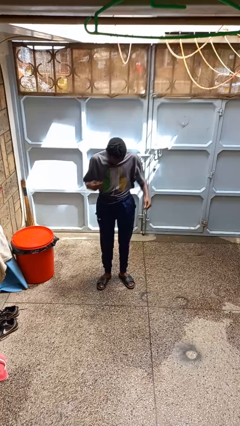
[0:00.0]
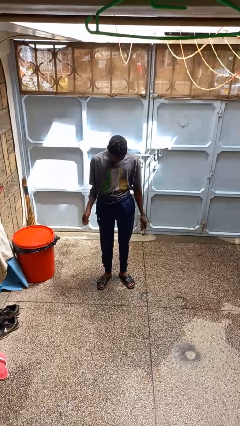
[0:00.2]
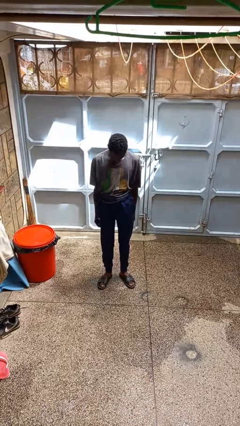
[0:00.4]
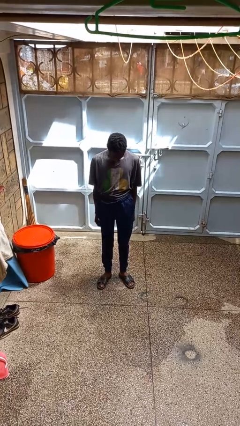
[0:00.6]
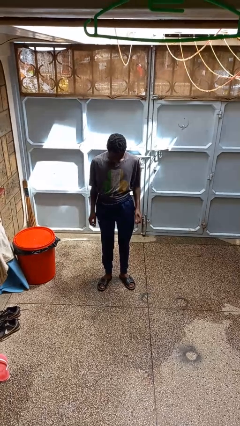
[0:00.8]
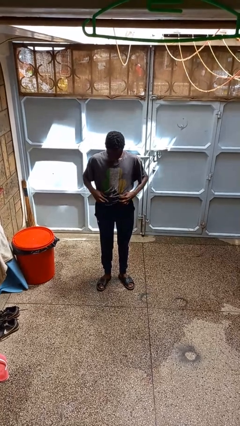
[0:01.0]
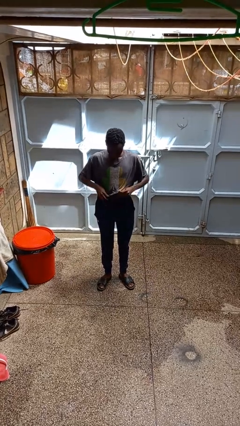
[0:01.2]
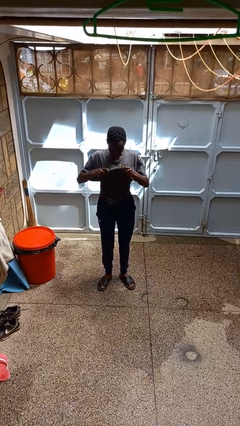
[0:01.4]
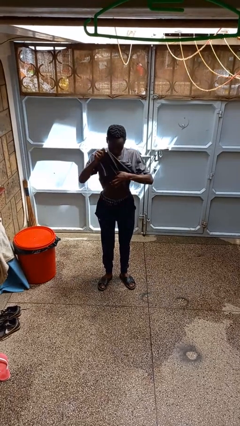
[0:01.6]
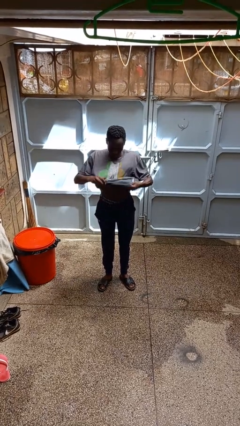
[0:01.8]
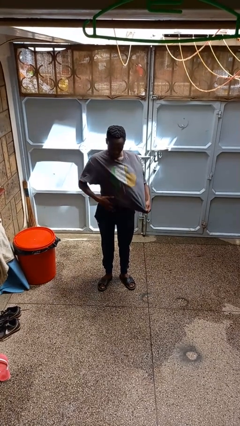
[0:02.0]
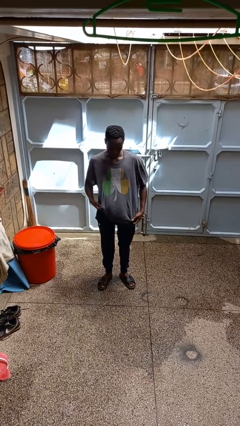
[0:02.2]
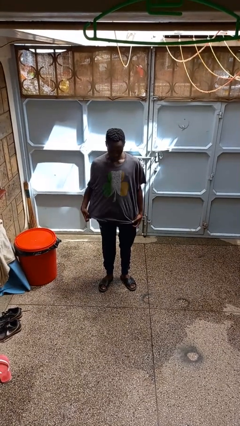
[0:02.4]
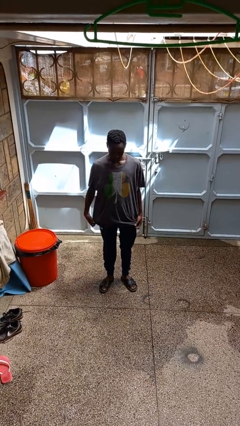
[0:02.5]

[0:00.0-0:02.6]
person untucks shirt

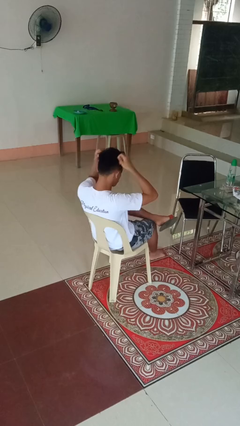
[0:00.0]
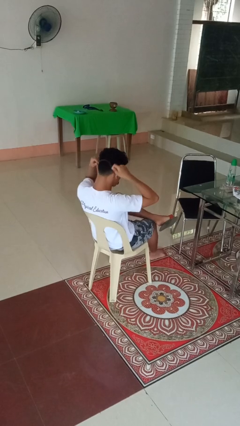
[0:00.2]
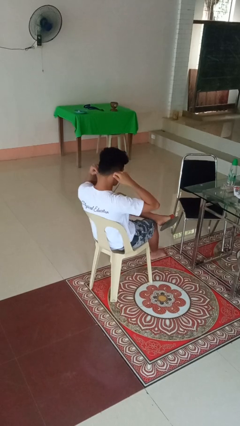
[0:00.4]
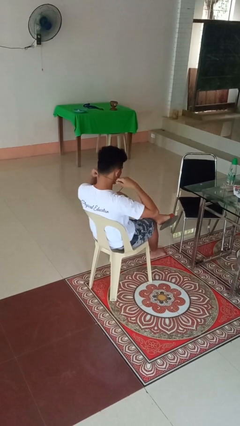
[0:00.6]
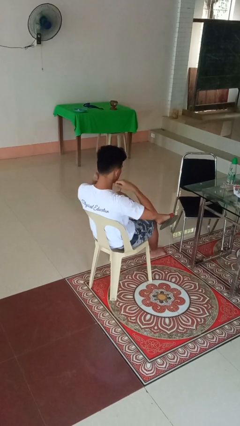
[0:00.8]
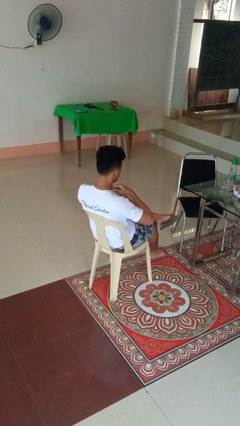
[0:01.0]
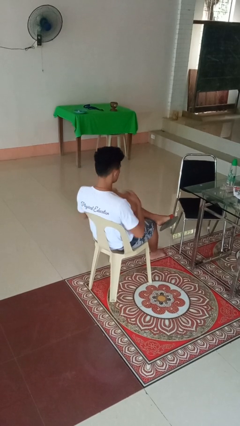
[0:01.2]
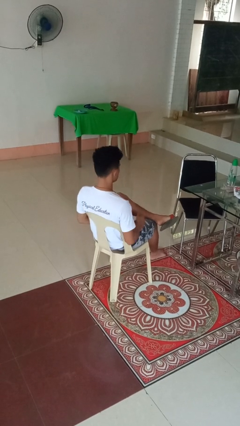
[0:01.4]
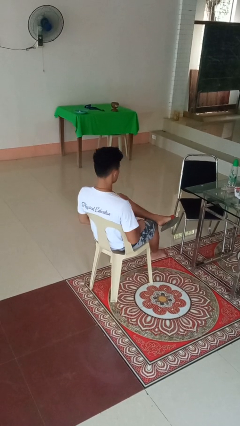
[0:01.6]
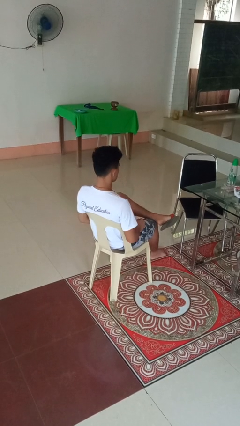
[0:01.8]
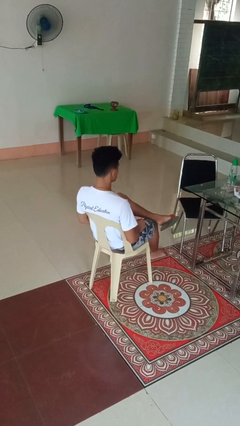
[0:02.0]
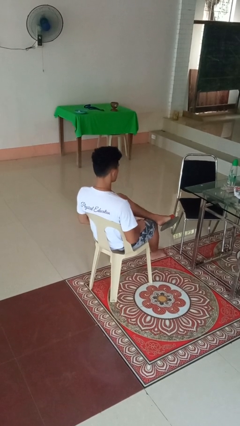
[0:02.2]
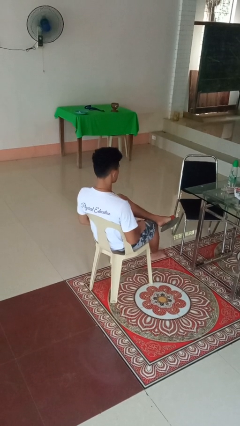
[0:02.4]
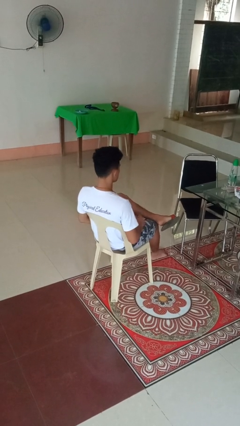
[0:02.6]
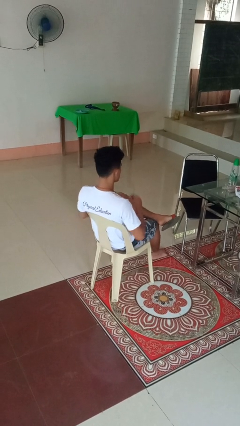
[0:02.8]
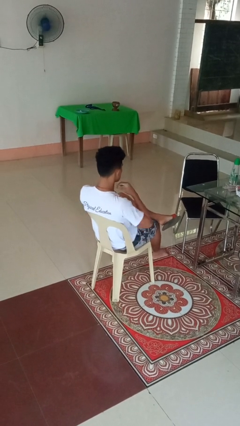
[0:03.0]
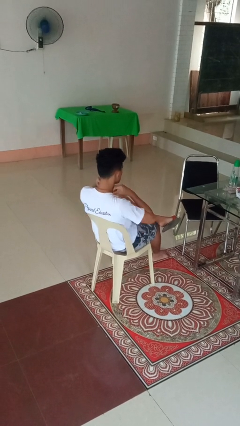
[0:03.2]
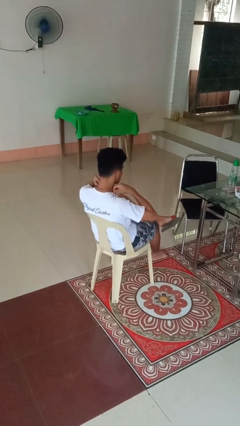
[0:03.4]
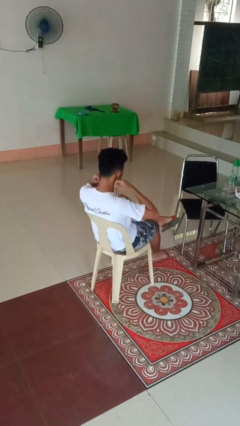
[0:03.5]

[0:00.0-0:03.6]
person puts on necklace

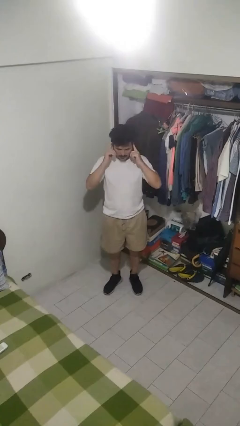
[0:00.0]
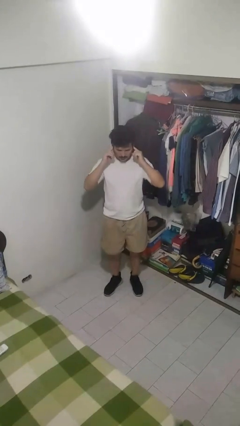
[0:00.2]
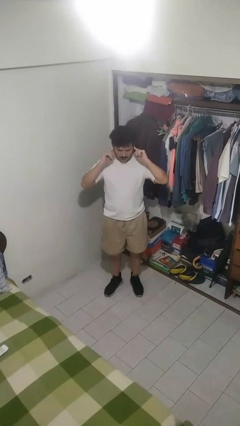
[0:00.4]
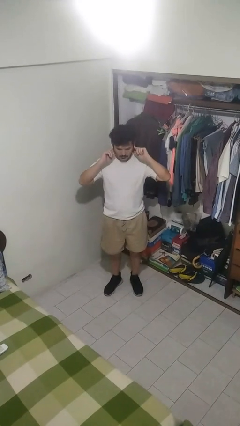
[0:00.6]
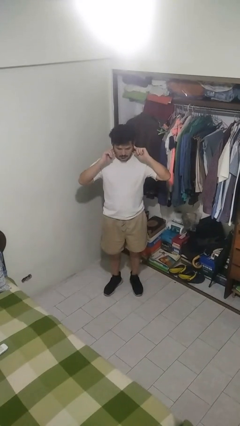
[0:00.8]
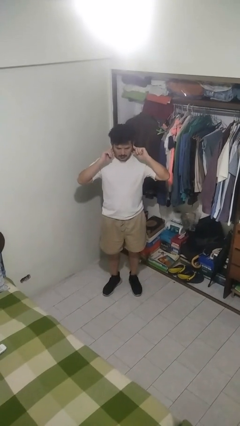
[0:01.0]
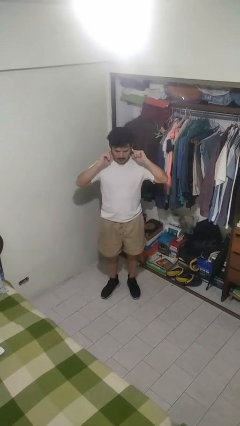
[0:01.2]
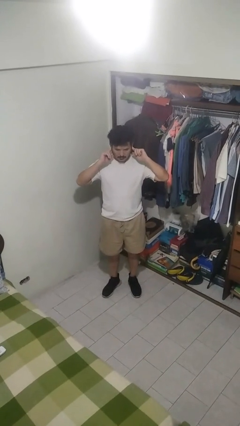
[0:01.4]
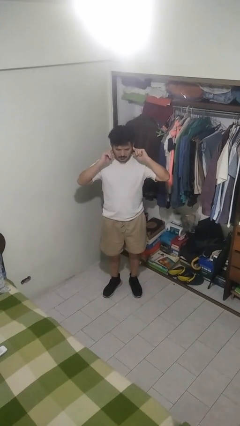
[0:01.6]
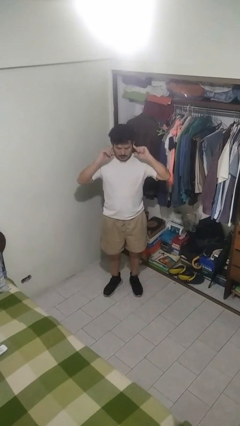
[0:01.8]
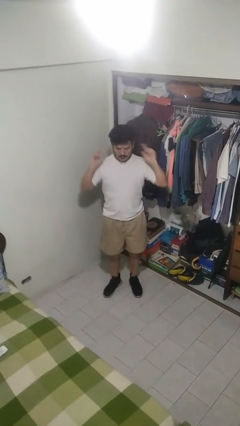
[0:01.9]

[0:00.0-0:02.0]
person puts fingers in ear

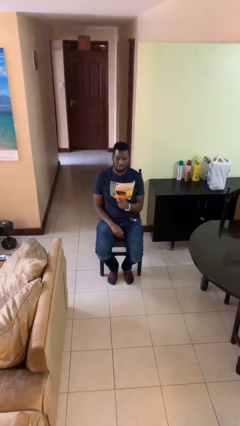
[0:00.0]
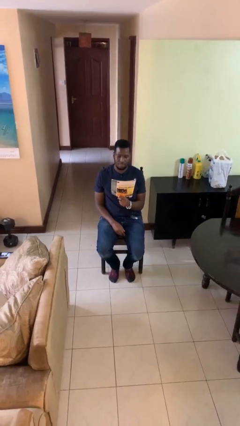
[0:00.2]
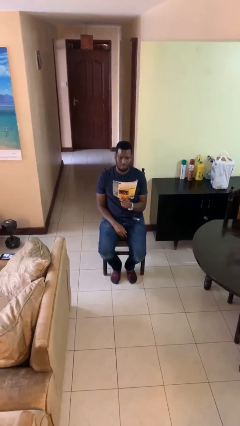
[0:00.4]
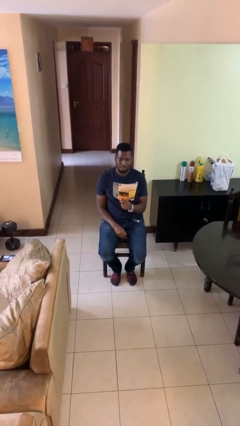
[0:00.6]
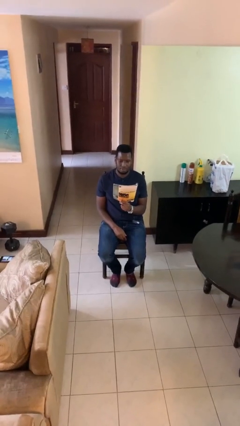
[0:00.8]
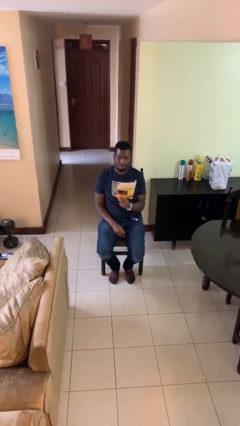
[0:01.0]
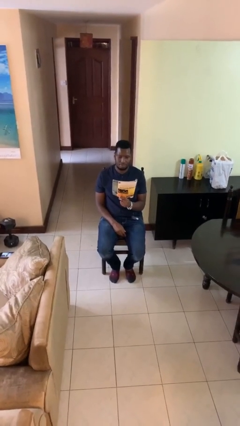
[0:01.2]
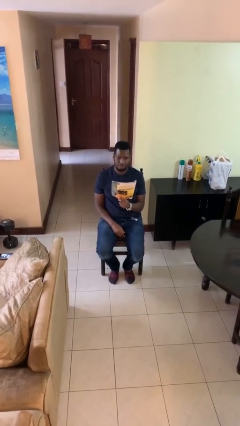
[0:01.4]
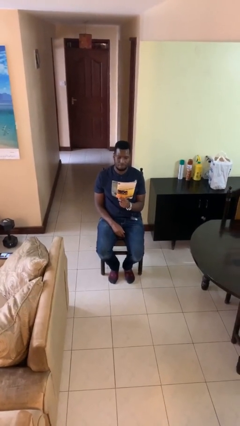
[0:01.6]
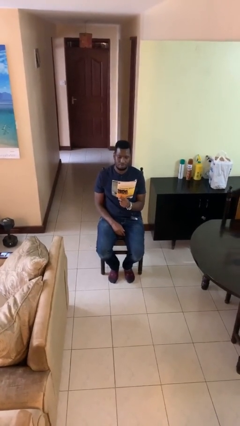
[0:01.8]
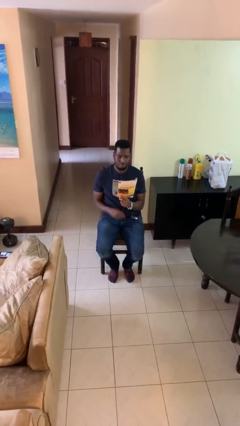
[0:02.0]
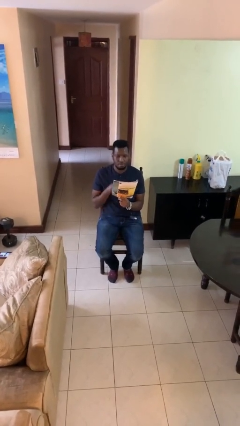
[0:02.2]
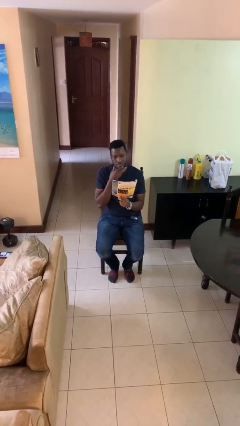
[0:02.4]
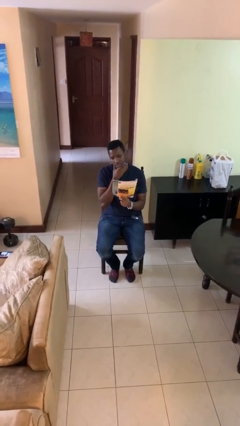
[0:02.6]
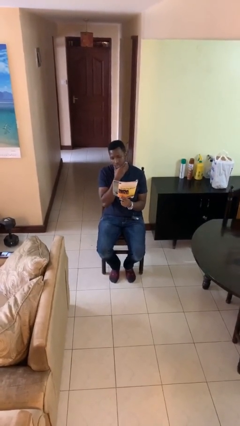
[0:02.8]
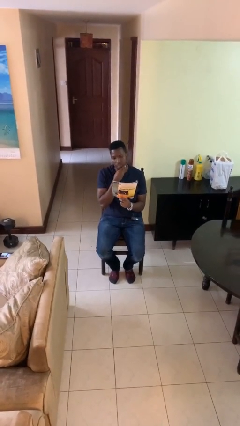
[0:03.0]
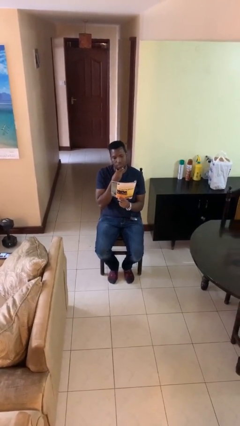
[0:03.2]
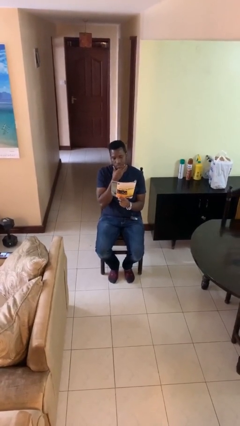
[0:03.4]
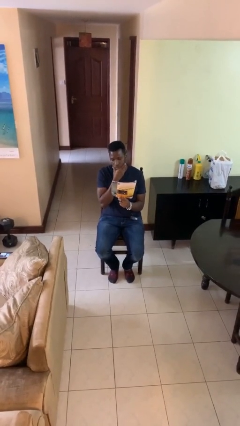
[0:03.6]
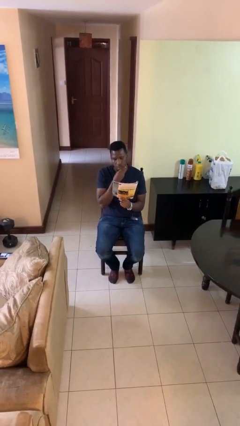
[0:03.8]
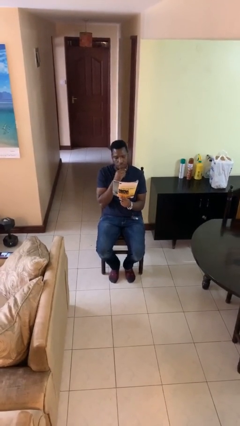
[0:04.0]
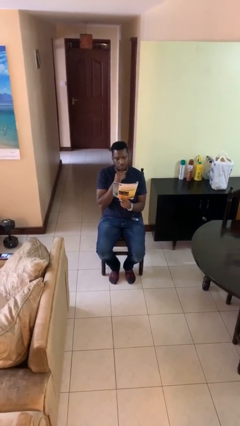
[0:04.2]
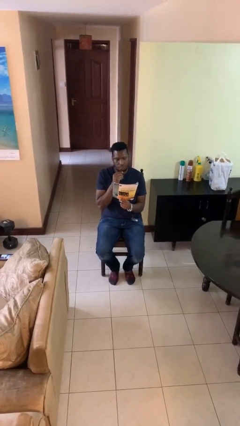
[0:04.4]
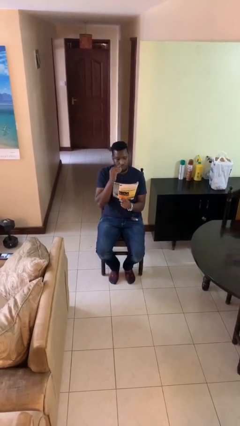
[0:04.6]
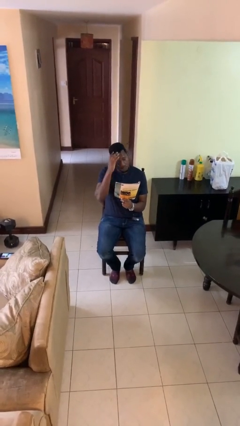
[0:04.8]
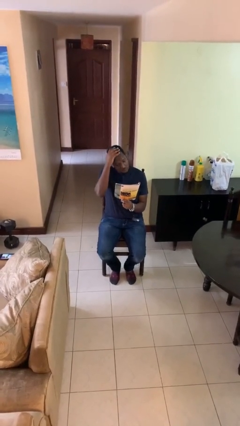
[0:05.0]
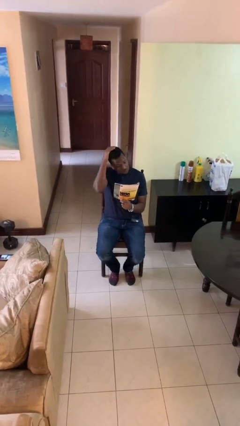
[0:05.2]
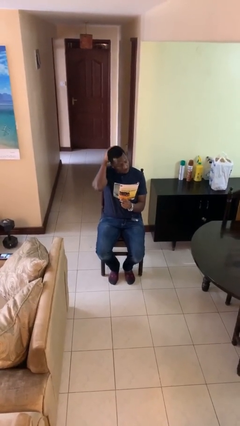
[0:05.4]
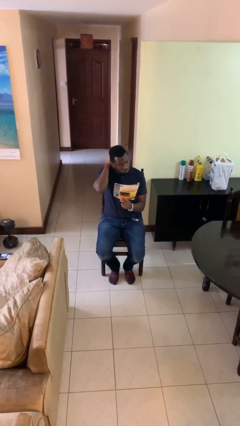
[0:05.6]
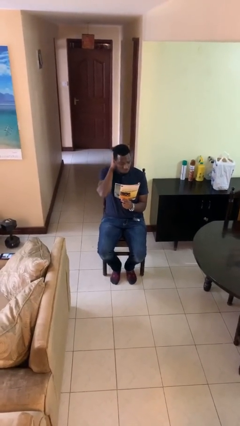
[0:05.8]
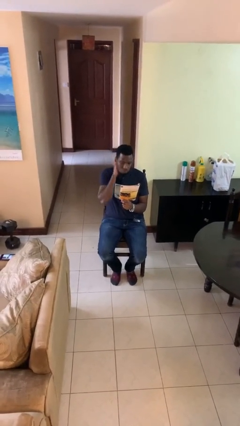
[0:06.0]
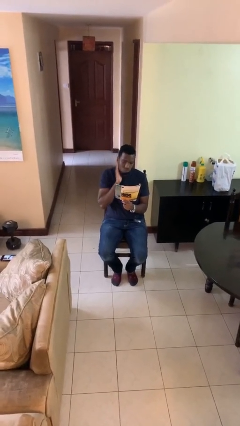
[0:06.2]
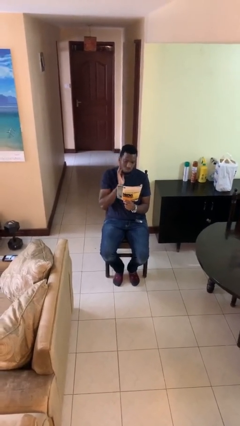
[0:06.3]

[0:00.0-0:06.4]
person reads document

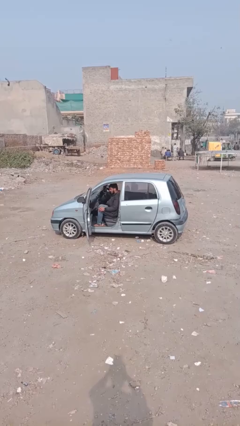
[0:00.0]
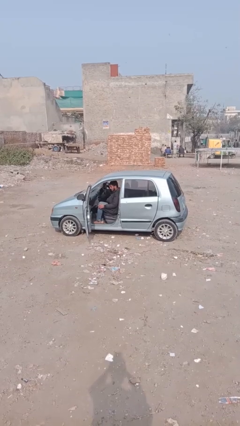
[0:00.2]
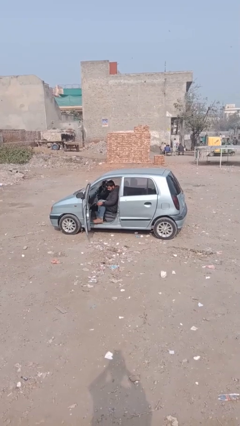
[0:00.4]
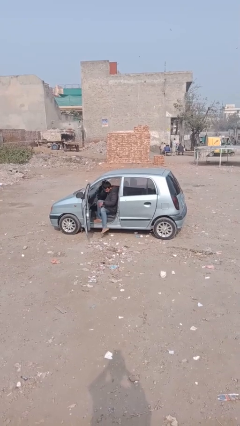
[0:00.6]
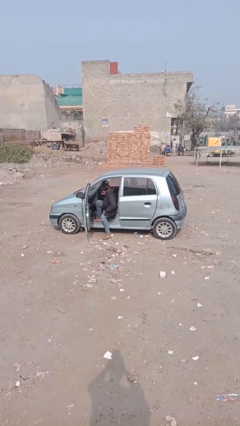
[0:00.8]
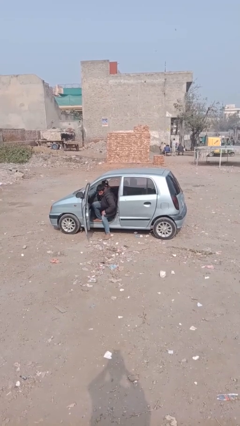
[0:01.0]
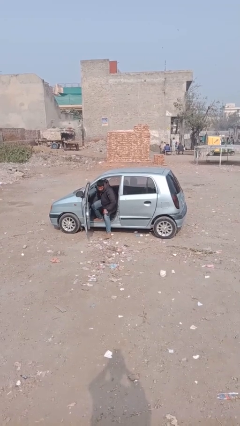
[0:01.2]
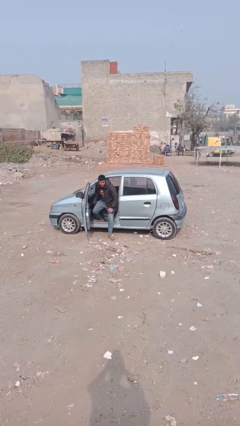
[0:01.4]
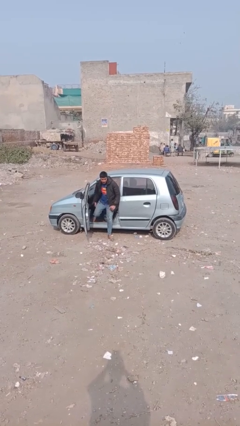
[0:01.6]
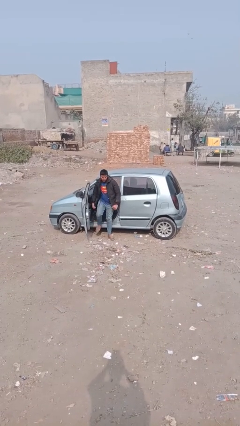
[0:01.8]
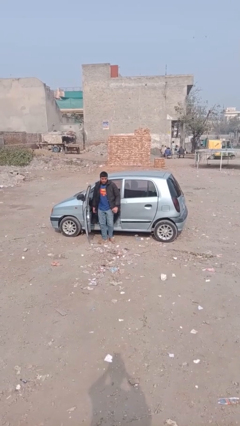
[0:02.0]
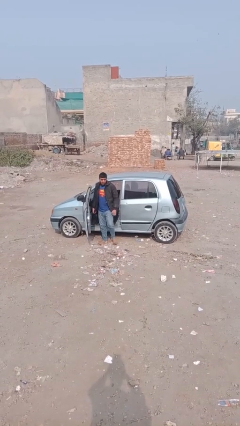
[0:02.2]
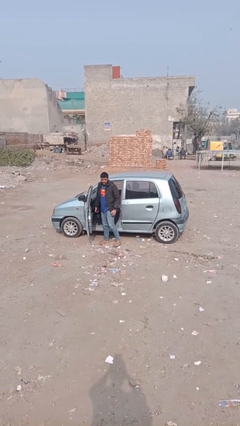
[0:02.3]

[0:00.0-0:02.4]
person exits car

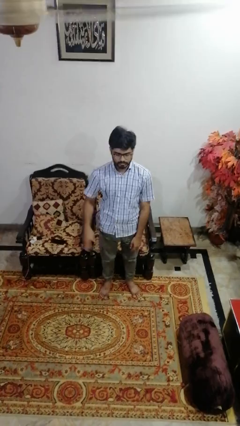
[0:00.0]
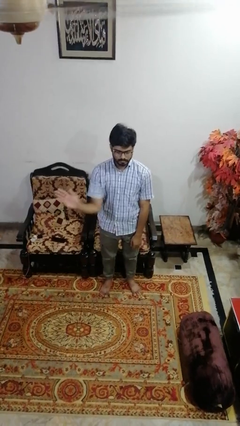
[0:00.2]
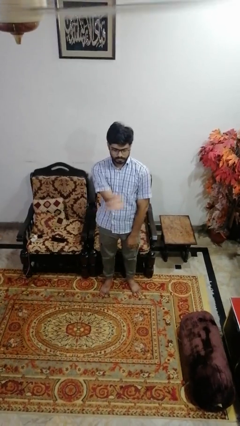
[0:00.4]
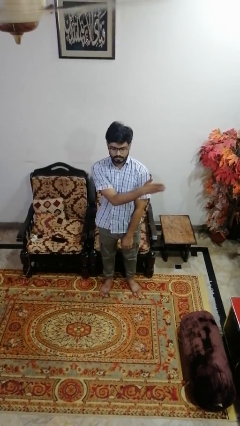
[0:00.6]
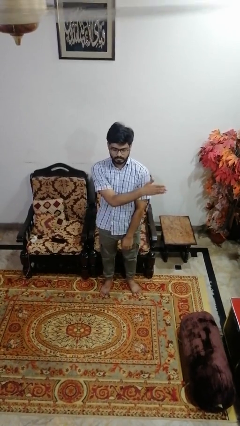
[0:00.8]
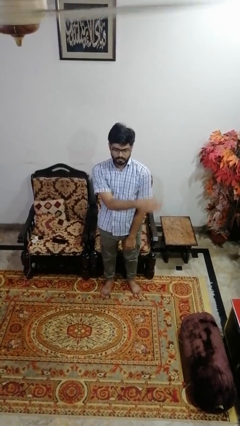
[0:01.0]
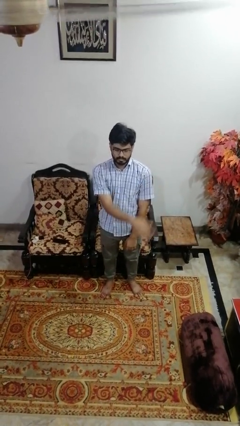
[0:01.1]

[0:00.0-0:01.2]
person gestures swipe left
